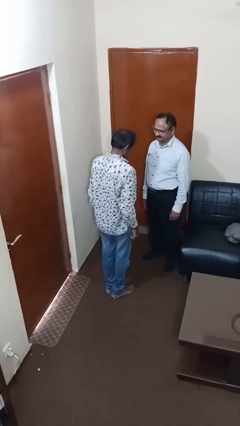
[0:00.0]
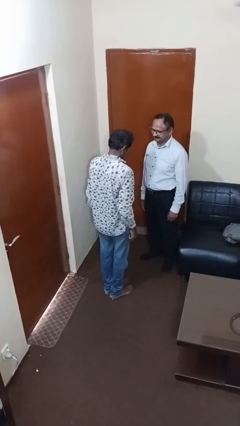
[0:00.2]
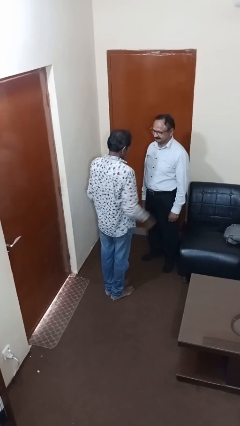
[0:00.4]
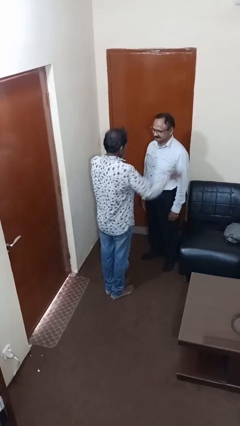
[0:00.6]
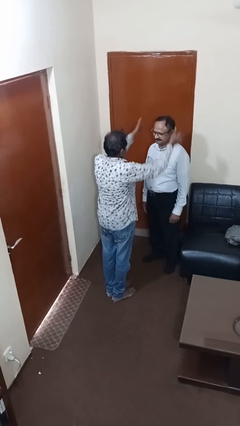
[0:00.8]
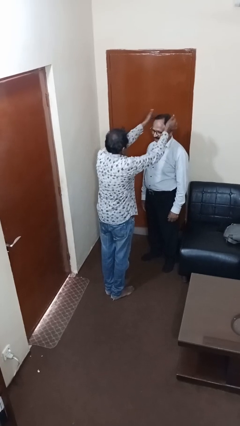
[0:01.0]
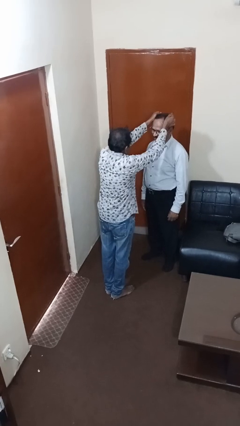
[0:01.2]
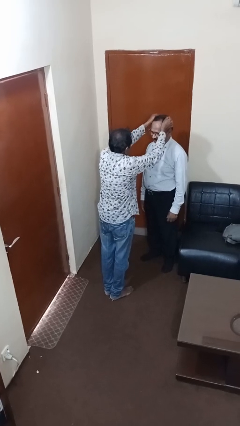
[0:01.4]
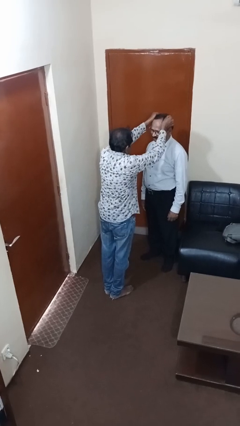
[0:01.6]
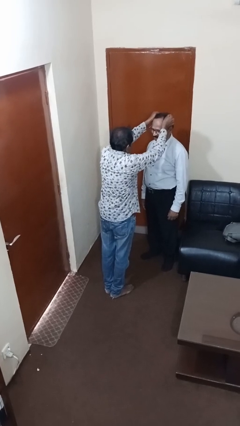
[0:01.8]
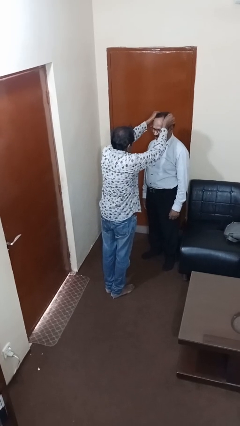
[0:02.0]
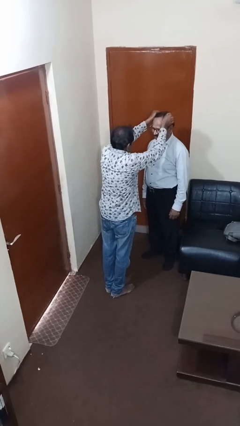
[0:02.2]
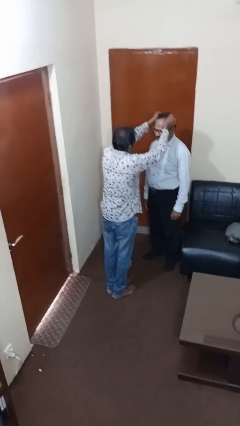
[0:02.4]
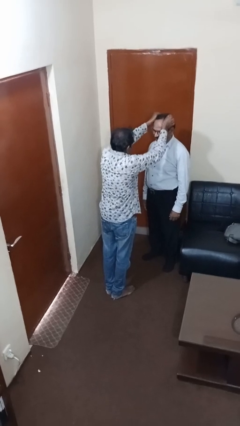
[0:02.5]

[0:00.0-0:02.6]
person grabs person by hair

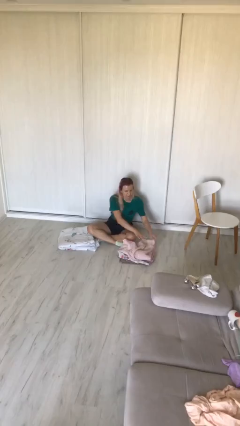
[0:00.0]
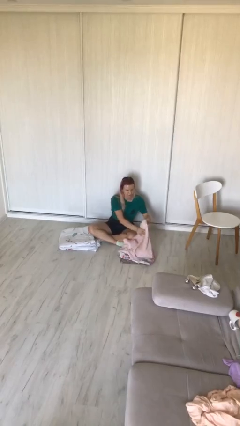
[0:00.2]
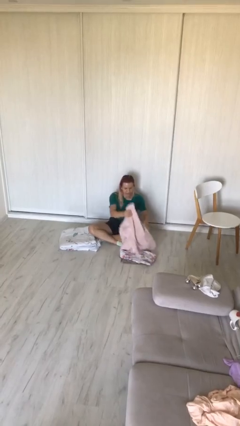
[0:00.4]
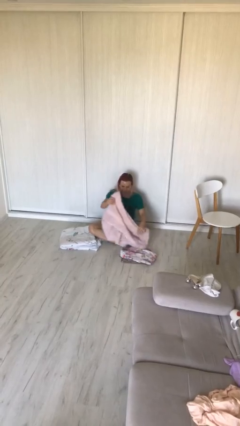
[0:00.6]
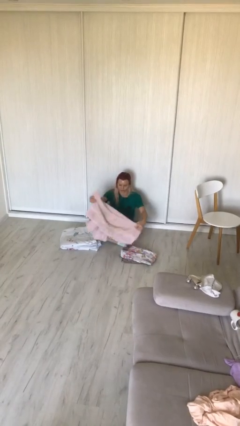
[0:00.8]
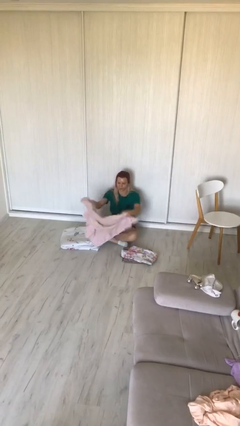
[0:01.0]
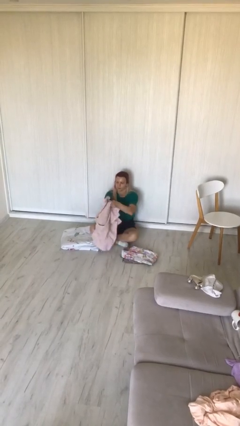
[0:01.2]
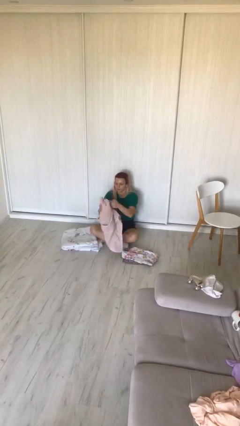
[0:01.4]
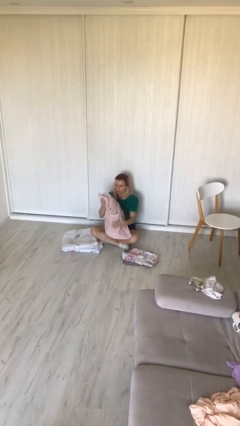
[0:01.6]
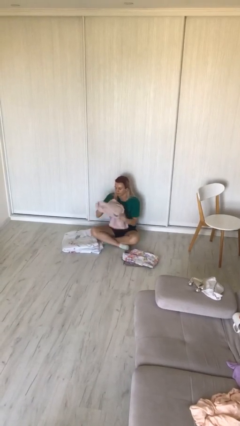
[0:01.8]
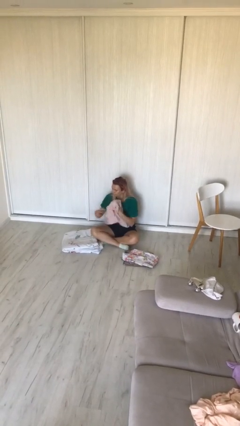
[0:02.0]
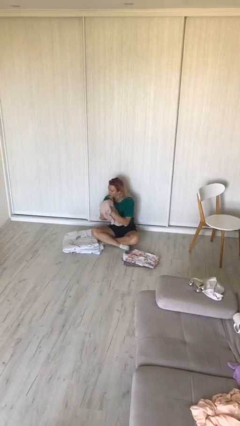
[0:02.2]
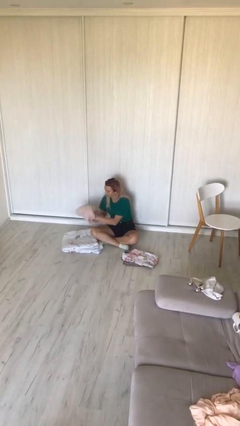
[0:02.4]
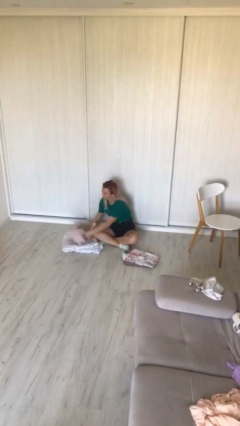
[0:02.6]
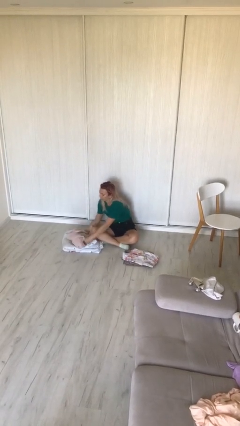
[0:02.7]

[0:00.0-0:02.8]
person folds towel

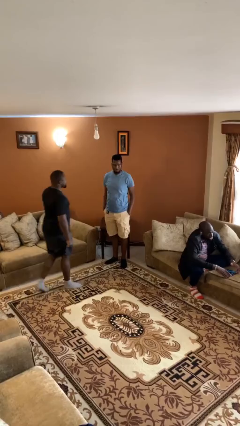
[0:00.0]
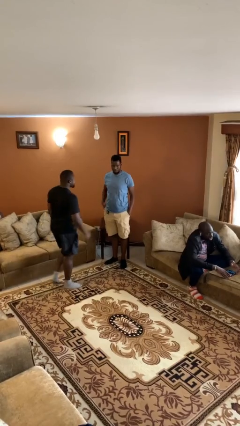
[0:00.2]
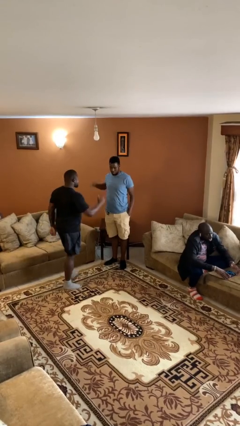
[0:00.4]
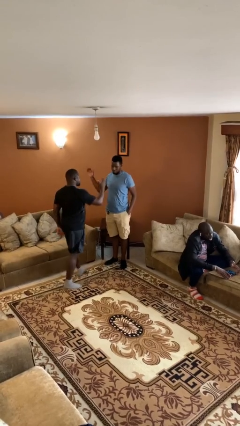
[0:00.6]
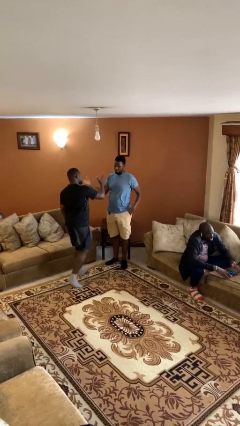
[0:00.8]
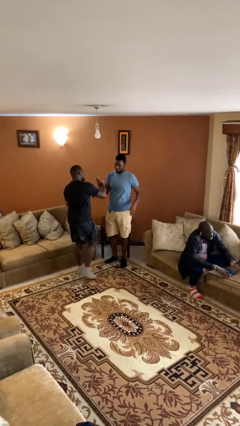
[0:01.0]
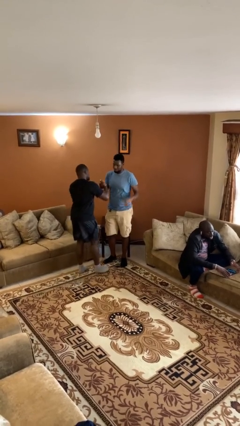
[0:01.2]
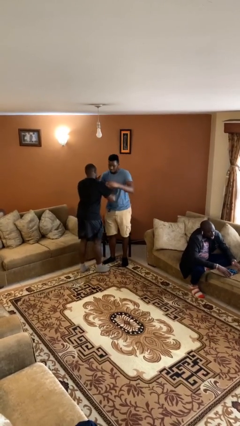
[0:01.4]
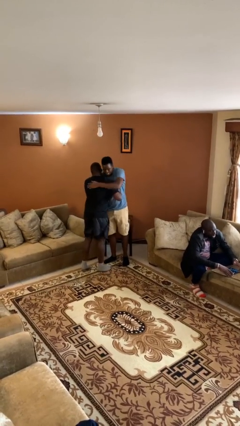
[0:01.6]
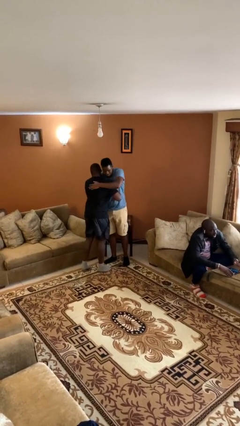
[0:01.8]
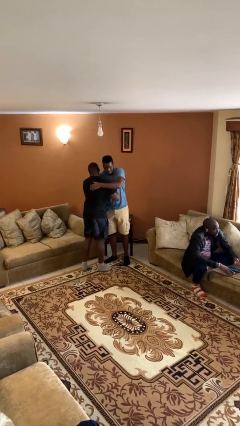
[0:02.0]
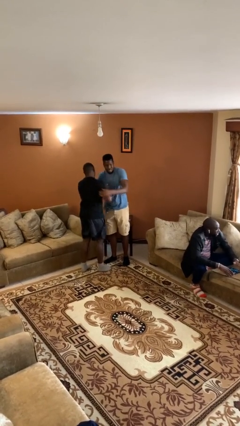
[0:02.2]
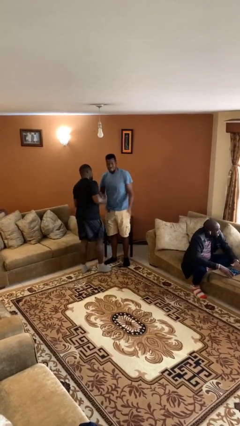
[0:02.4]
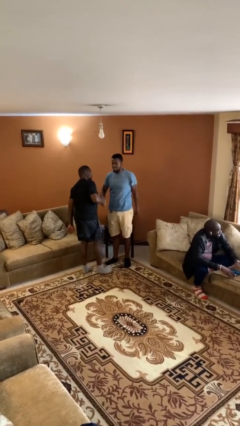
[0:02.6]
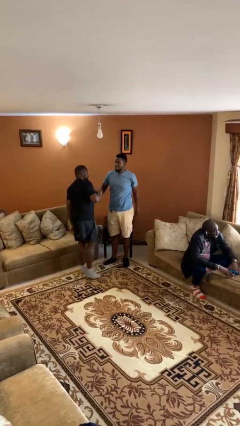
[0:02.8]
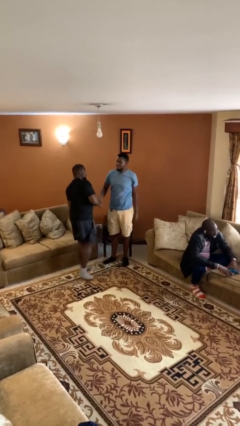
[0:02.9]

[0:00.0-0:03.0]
person embraces person

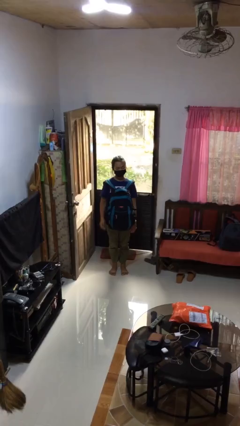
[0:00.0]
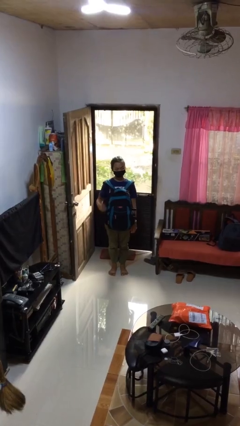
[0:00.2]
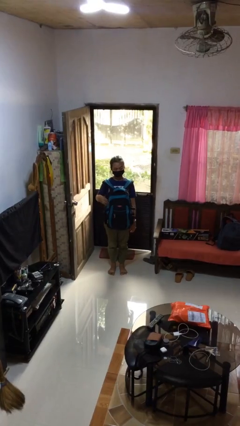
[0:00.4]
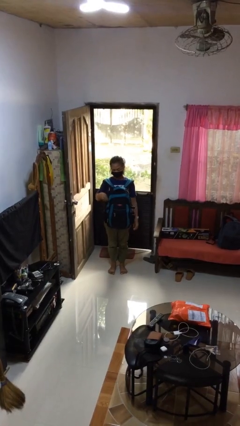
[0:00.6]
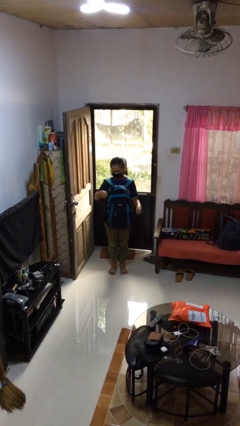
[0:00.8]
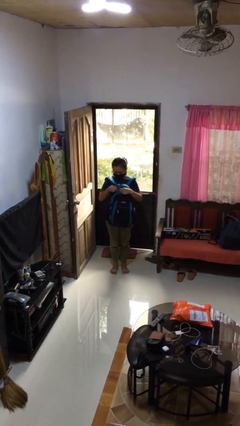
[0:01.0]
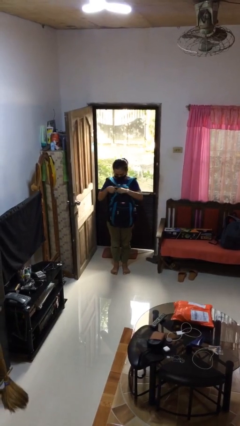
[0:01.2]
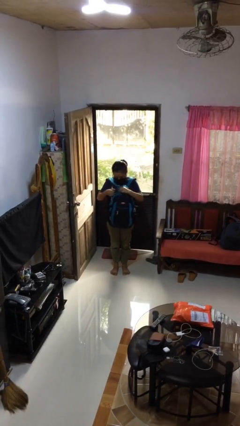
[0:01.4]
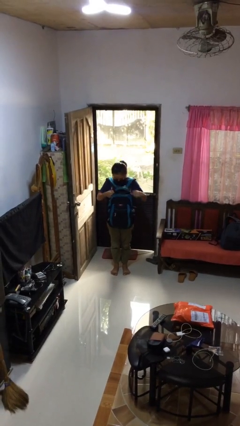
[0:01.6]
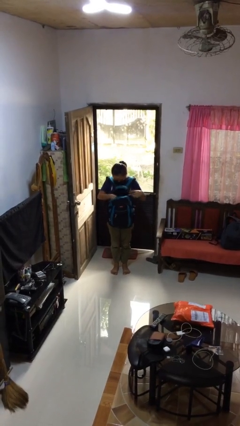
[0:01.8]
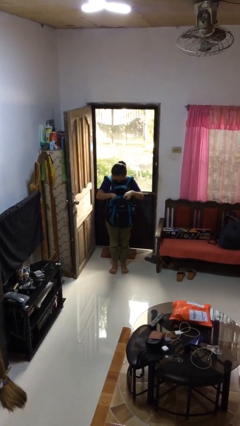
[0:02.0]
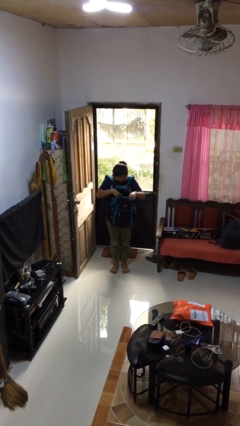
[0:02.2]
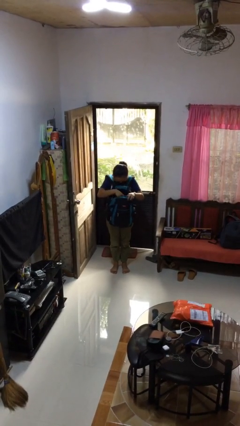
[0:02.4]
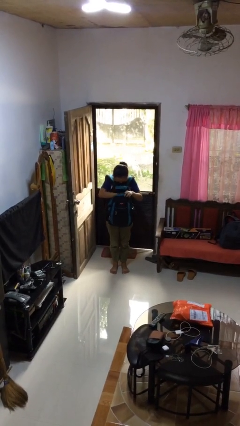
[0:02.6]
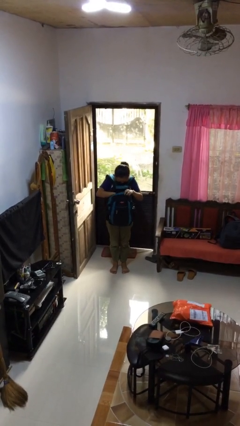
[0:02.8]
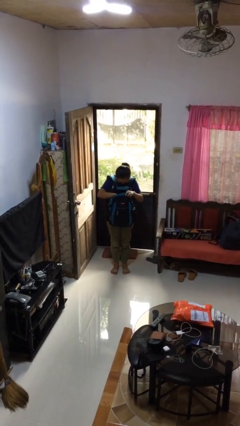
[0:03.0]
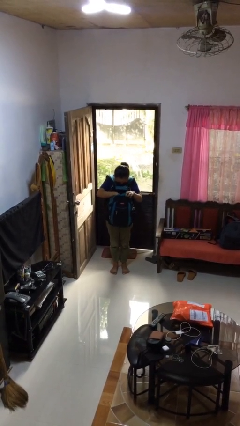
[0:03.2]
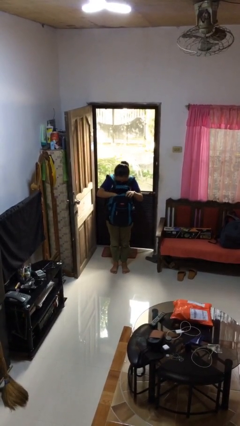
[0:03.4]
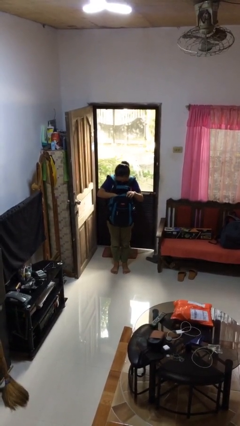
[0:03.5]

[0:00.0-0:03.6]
person searches in backpack

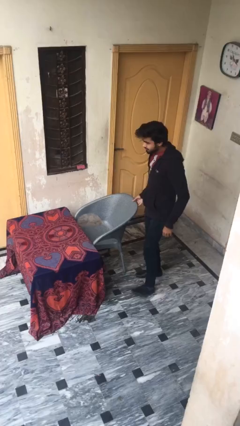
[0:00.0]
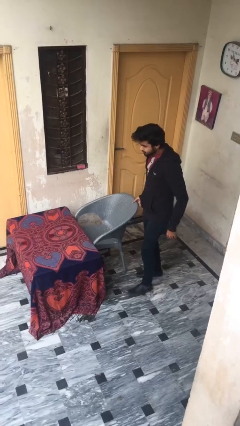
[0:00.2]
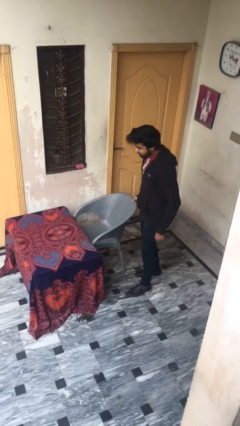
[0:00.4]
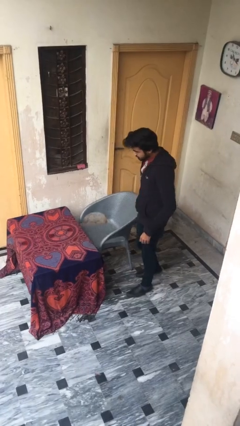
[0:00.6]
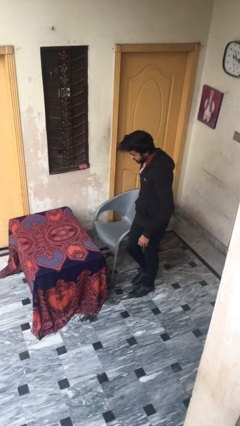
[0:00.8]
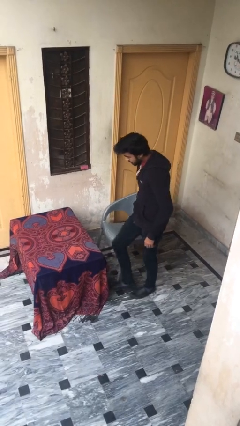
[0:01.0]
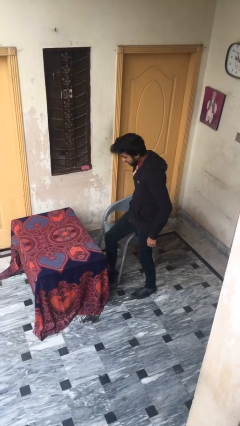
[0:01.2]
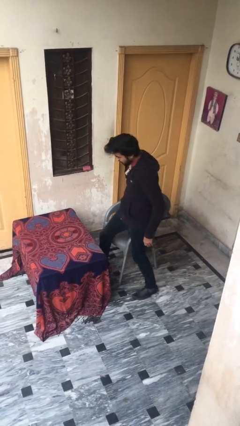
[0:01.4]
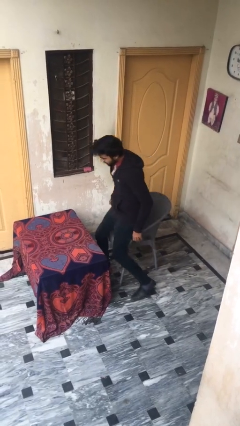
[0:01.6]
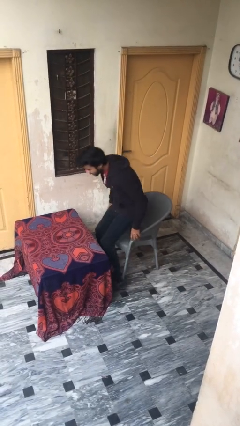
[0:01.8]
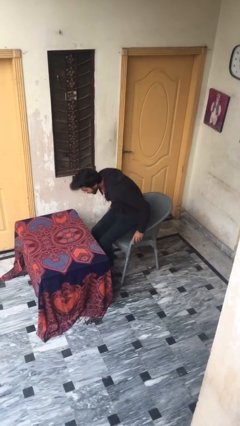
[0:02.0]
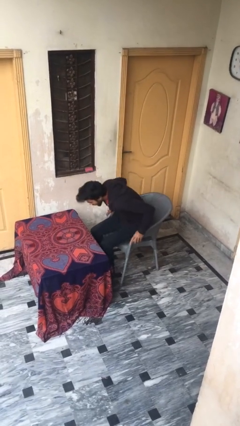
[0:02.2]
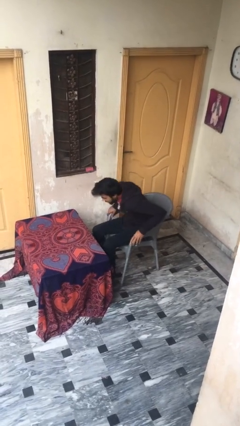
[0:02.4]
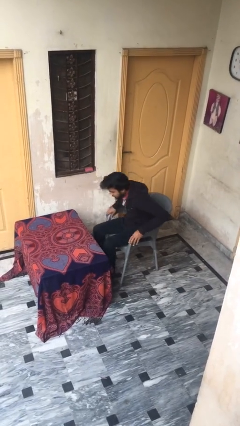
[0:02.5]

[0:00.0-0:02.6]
person sits down

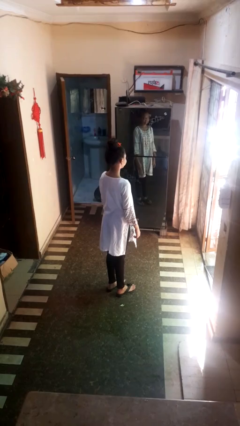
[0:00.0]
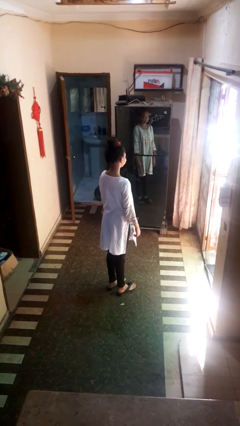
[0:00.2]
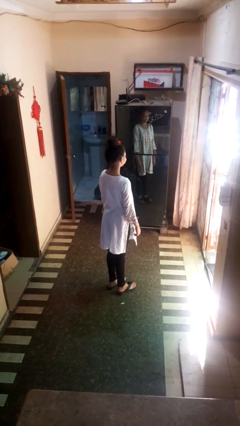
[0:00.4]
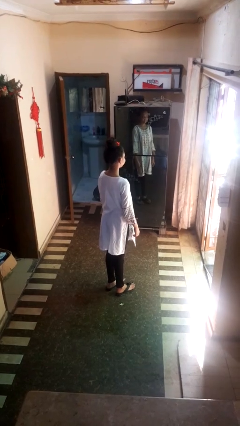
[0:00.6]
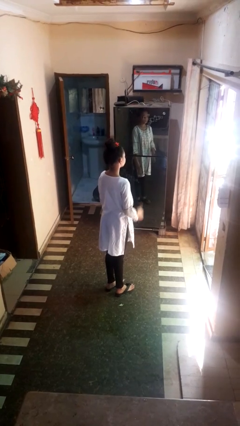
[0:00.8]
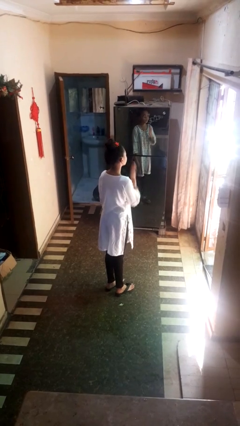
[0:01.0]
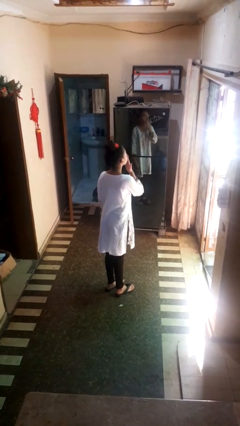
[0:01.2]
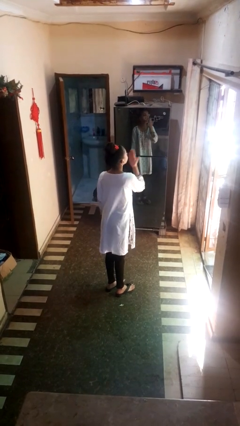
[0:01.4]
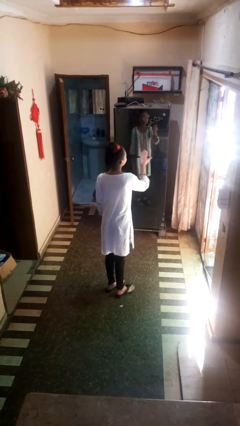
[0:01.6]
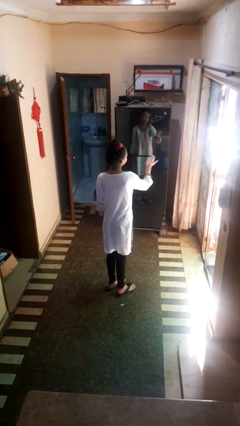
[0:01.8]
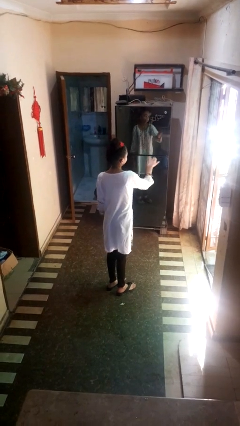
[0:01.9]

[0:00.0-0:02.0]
person gestures blow kiss

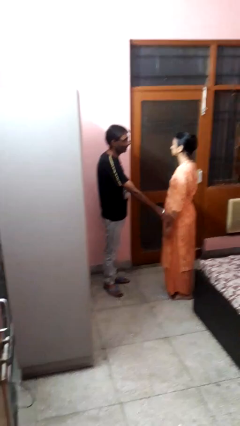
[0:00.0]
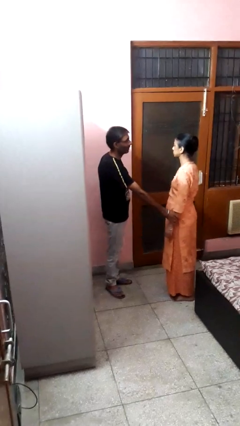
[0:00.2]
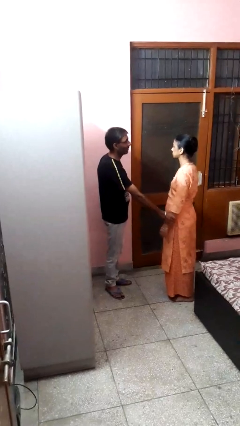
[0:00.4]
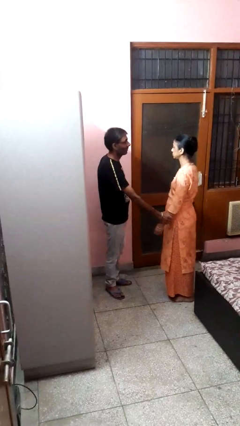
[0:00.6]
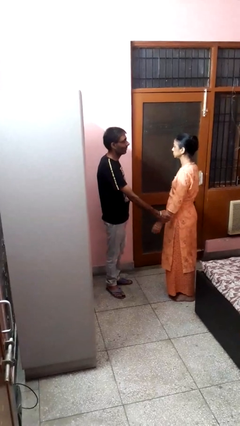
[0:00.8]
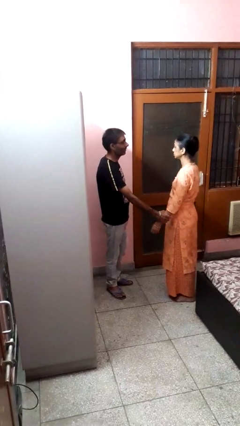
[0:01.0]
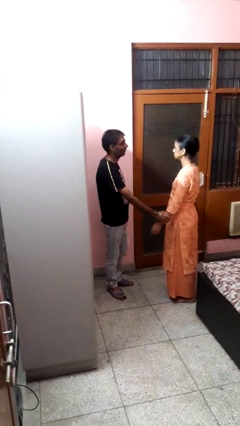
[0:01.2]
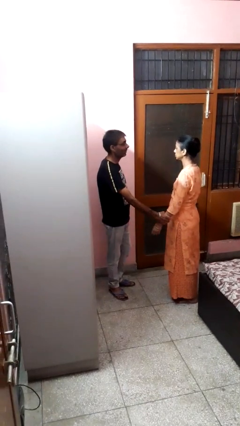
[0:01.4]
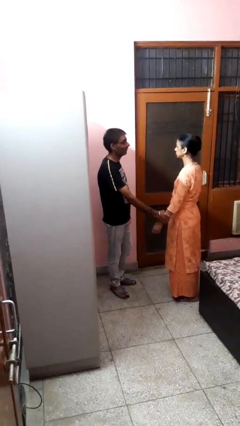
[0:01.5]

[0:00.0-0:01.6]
person grabs person by forearm
